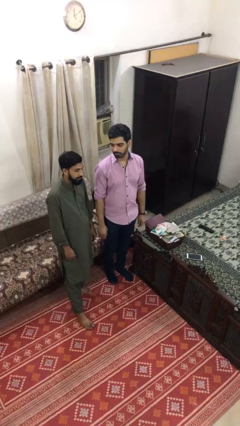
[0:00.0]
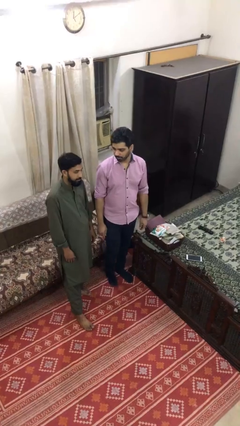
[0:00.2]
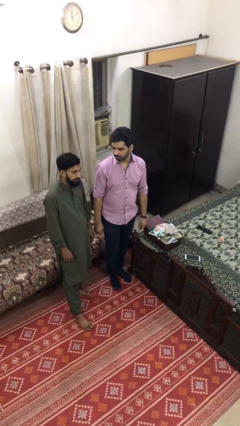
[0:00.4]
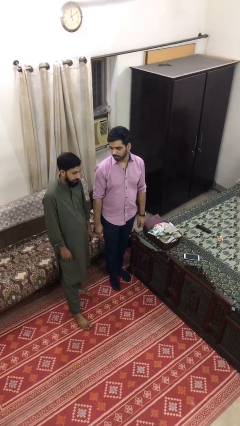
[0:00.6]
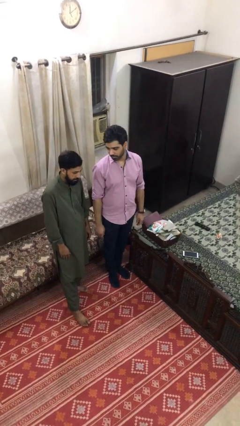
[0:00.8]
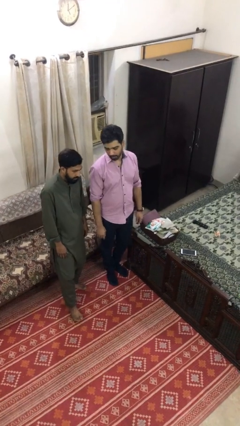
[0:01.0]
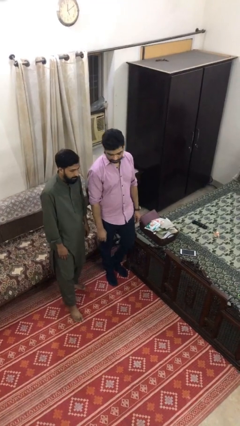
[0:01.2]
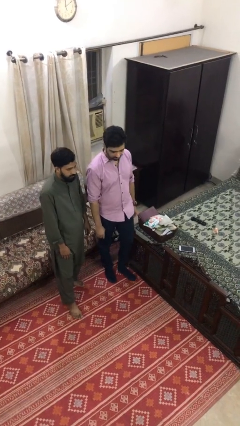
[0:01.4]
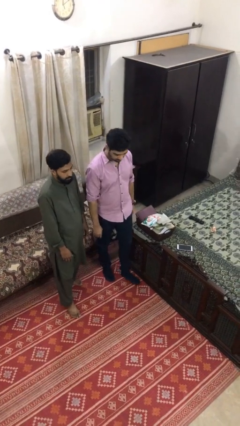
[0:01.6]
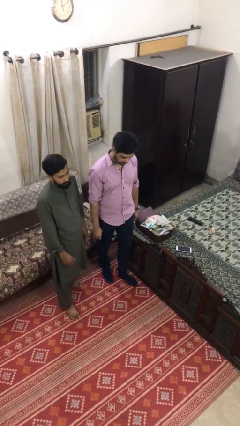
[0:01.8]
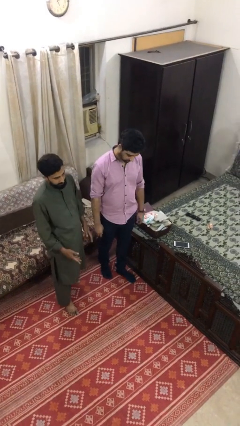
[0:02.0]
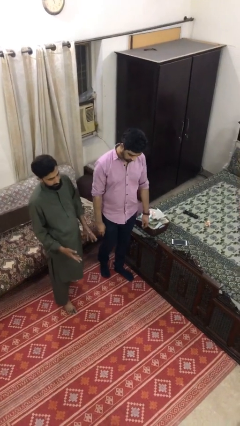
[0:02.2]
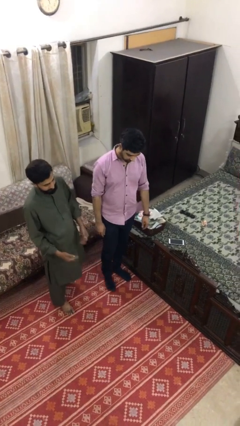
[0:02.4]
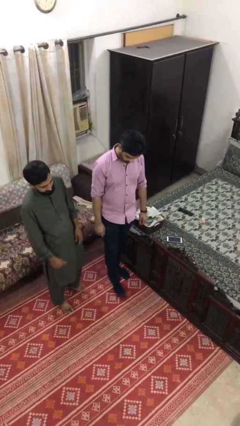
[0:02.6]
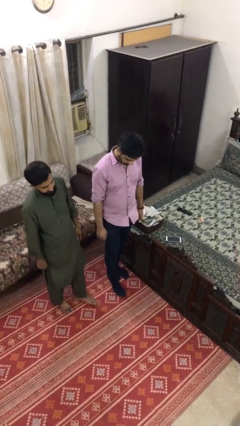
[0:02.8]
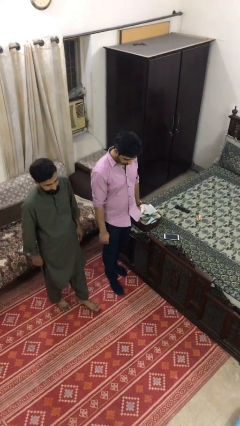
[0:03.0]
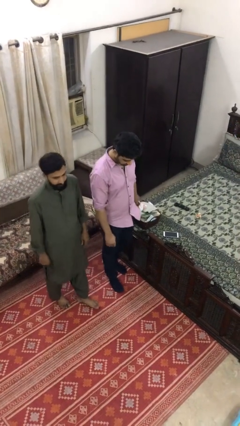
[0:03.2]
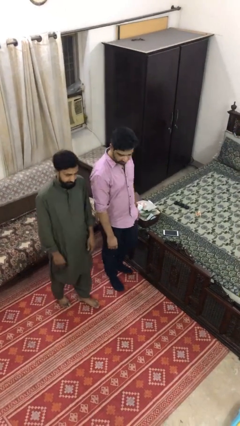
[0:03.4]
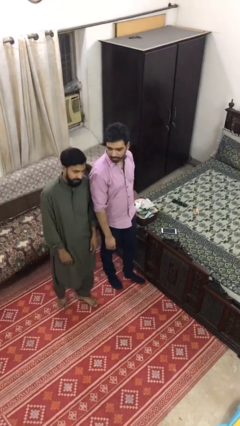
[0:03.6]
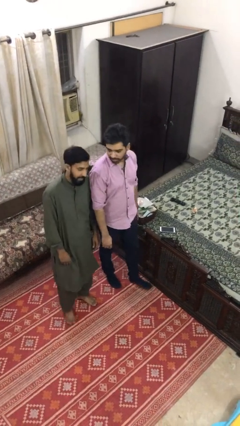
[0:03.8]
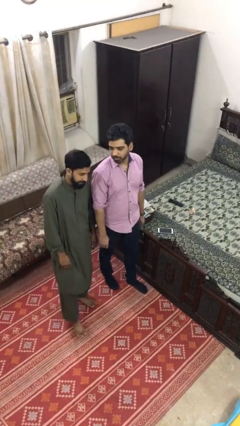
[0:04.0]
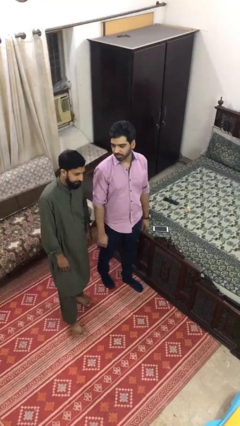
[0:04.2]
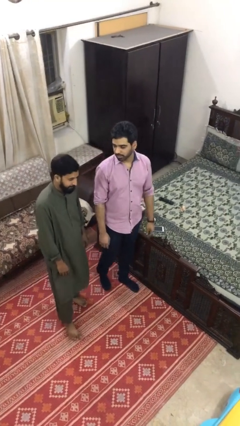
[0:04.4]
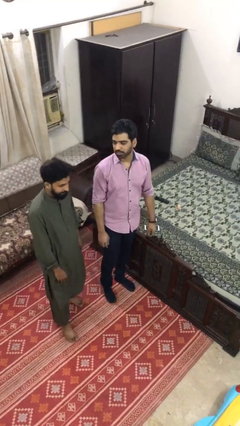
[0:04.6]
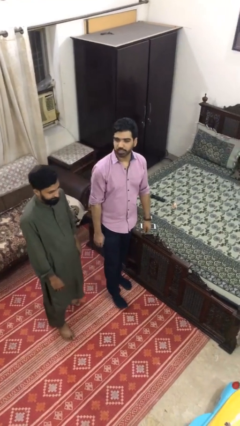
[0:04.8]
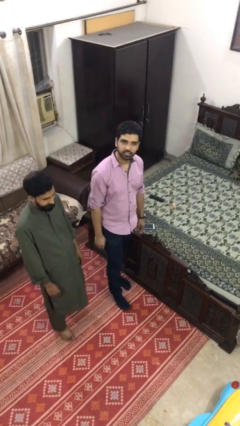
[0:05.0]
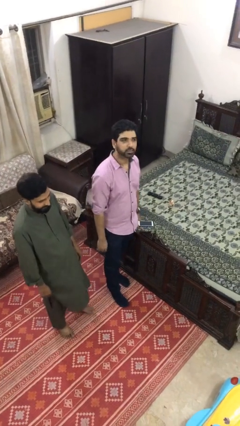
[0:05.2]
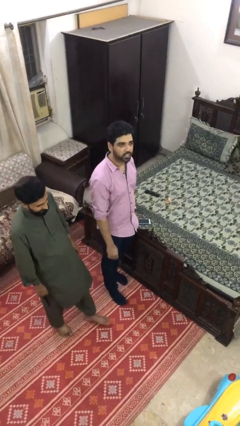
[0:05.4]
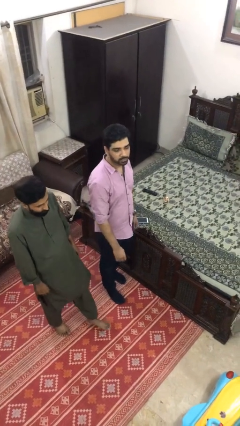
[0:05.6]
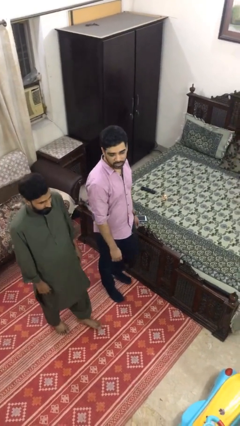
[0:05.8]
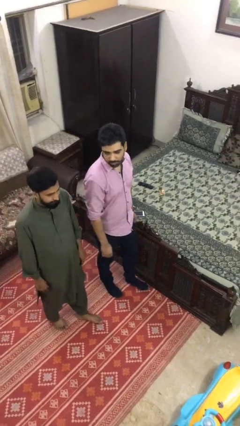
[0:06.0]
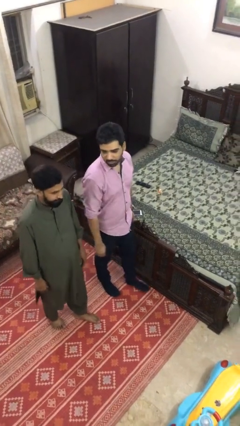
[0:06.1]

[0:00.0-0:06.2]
person talks to person

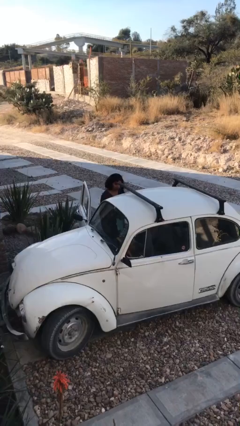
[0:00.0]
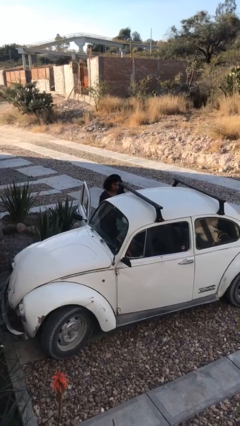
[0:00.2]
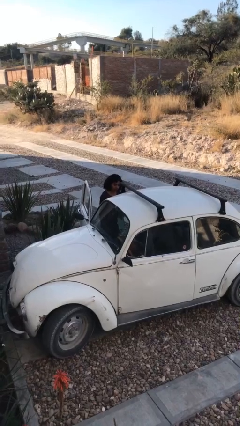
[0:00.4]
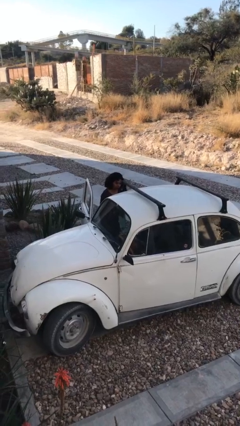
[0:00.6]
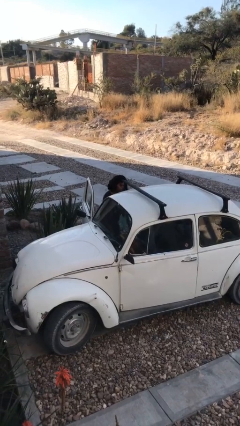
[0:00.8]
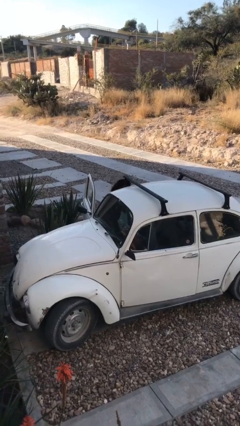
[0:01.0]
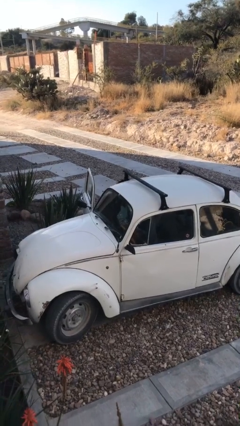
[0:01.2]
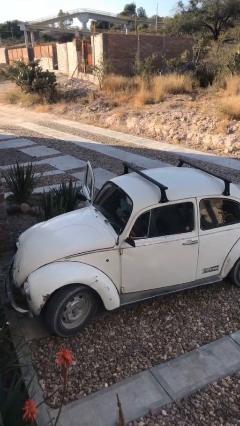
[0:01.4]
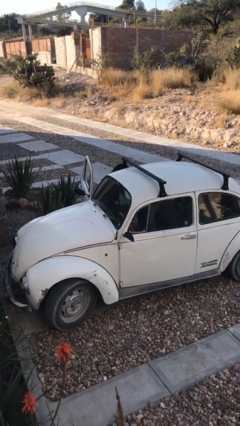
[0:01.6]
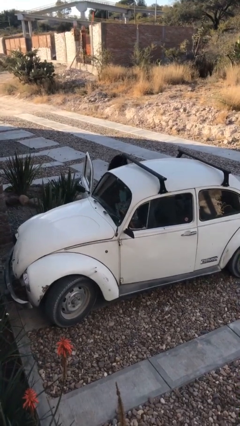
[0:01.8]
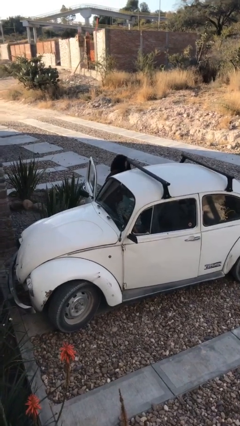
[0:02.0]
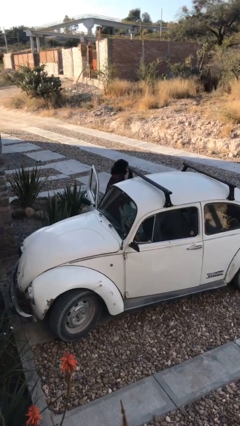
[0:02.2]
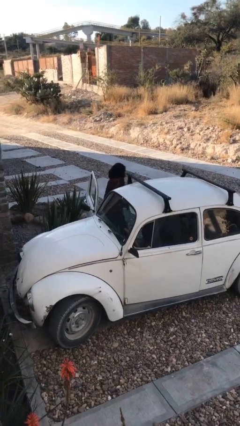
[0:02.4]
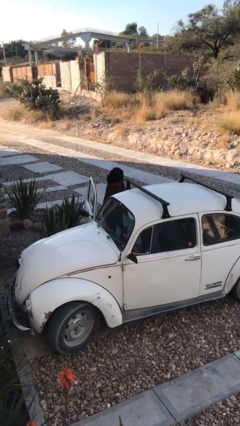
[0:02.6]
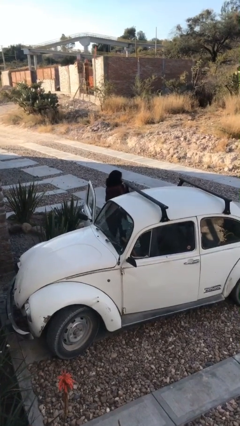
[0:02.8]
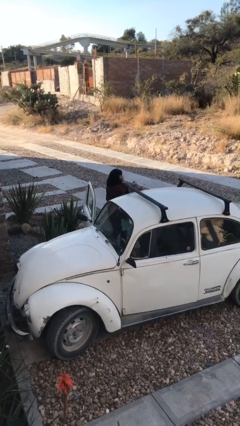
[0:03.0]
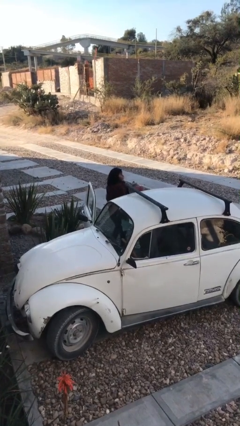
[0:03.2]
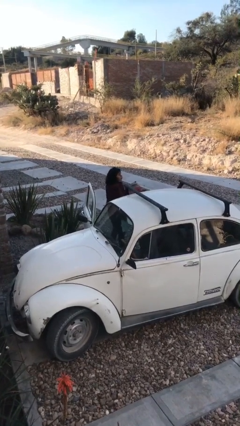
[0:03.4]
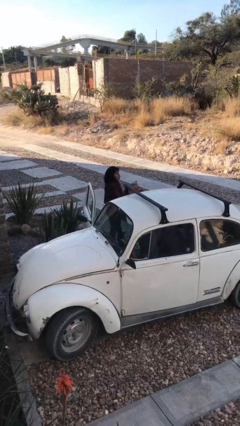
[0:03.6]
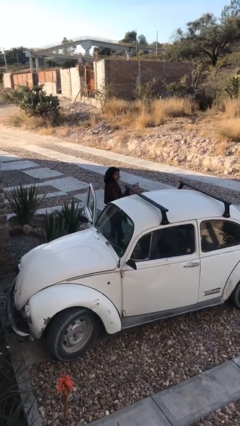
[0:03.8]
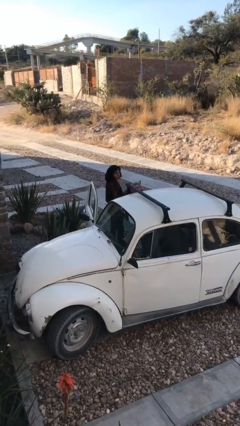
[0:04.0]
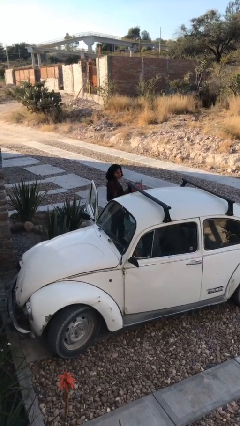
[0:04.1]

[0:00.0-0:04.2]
person unloads car

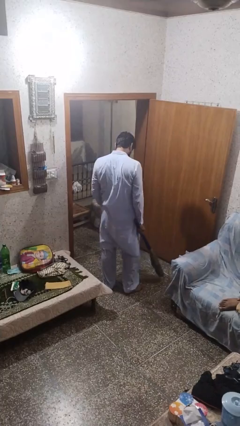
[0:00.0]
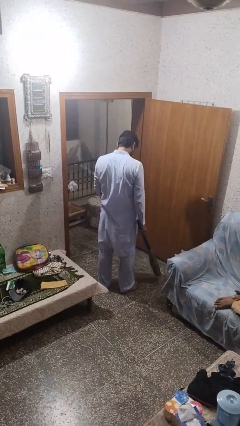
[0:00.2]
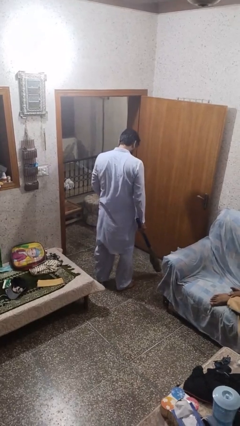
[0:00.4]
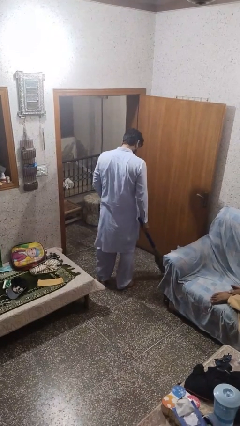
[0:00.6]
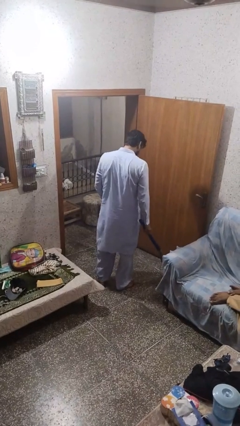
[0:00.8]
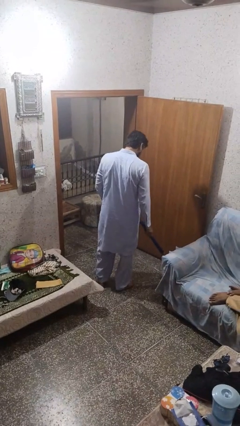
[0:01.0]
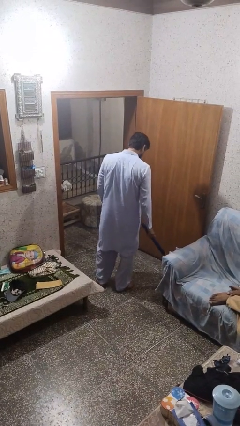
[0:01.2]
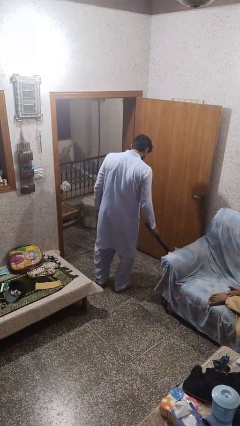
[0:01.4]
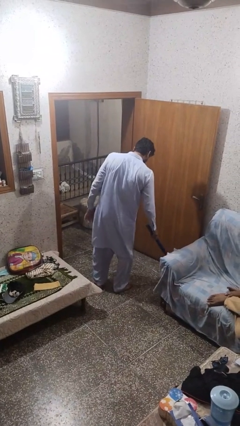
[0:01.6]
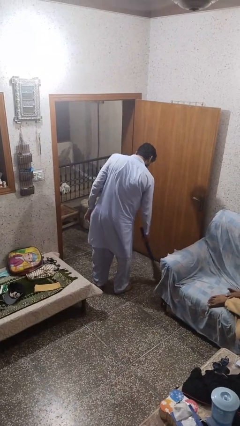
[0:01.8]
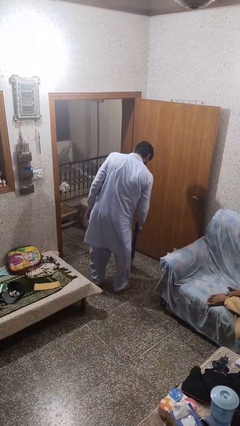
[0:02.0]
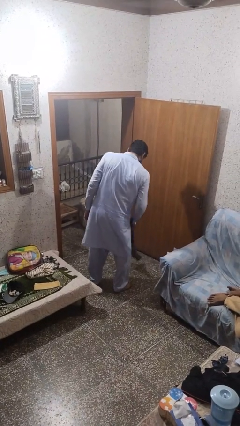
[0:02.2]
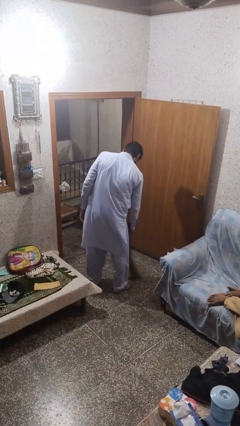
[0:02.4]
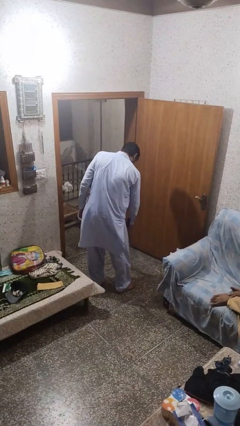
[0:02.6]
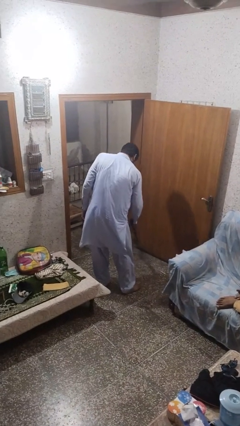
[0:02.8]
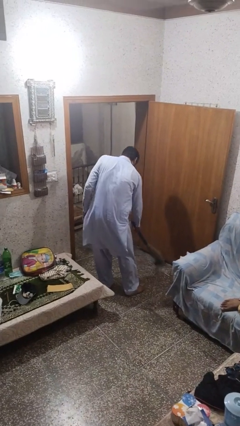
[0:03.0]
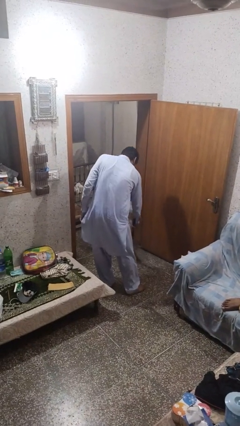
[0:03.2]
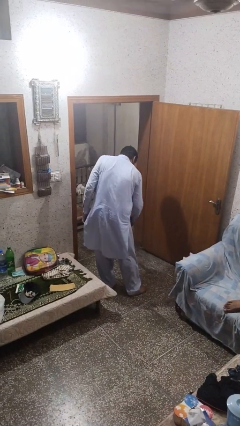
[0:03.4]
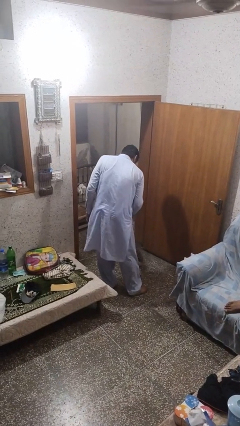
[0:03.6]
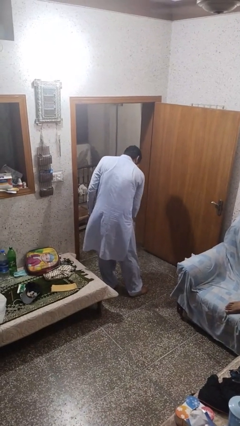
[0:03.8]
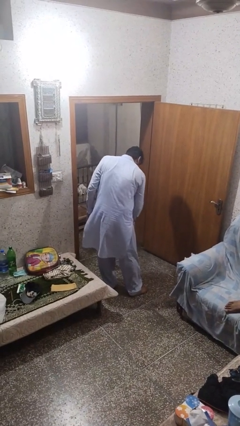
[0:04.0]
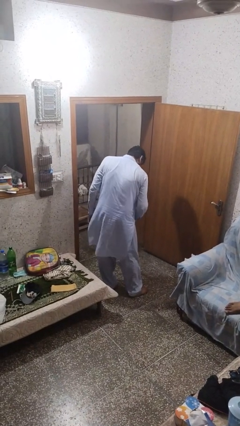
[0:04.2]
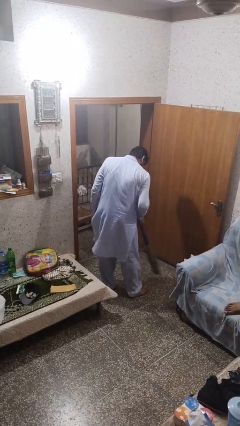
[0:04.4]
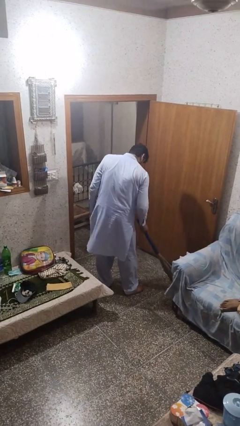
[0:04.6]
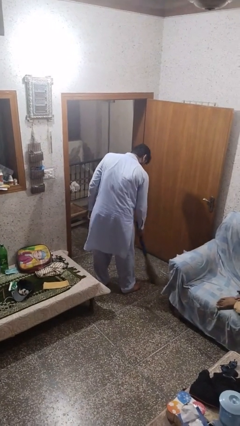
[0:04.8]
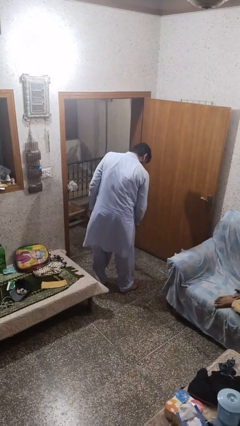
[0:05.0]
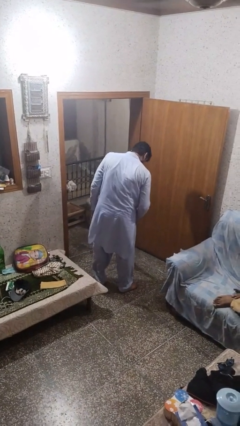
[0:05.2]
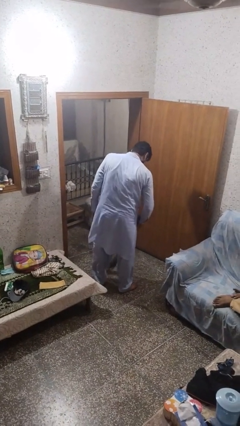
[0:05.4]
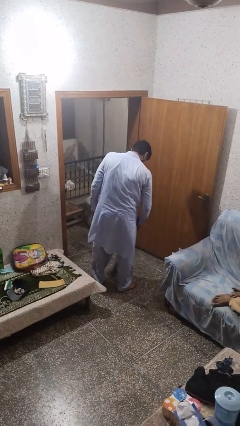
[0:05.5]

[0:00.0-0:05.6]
person sweeps floor

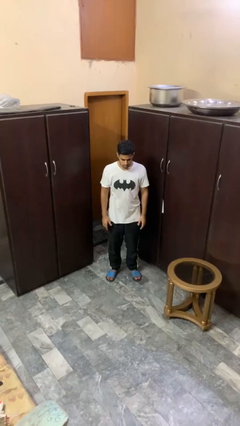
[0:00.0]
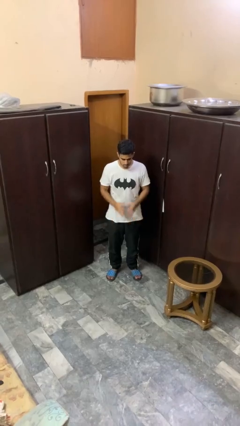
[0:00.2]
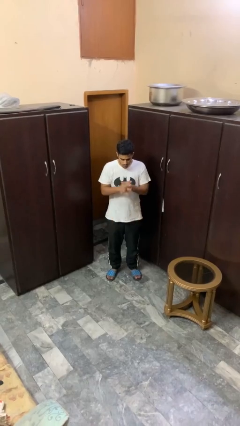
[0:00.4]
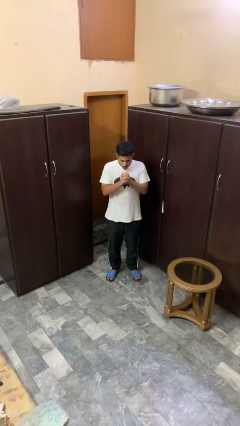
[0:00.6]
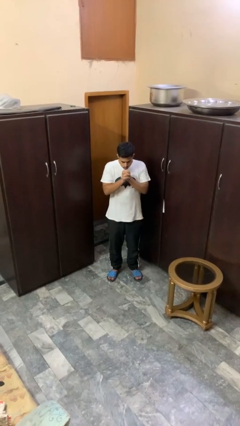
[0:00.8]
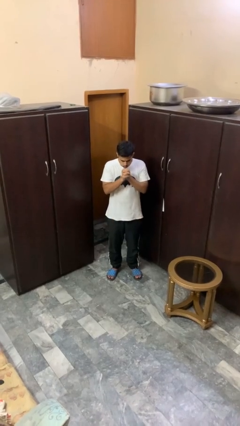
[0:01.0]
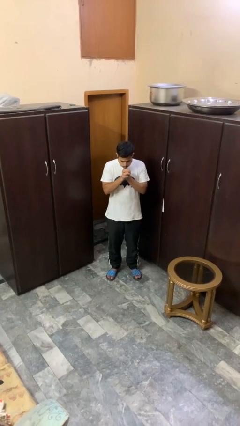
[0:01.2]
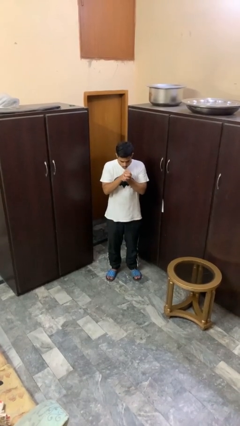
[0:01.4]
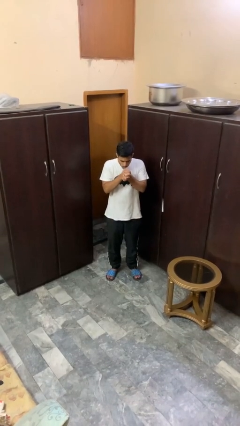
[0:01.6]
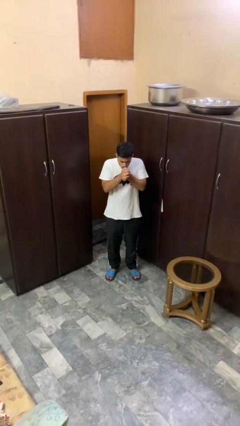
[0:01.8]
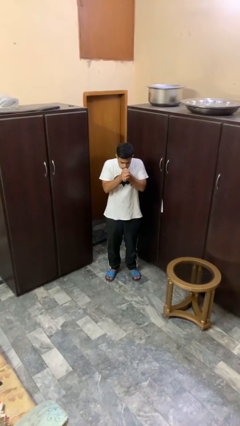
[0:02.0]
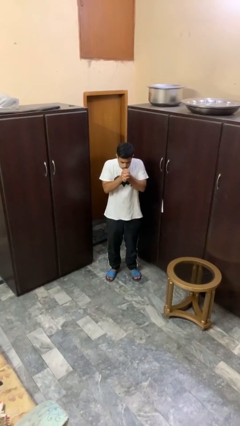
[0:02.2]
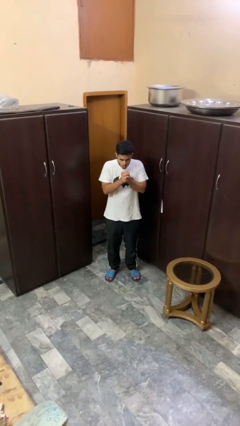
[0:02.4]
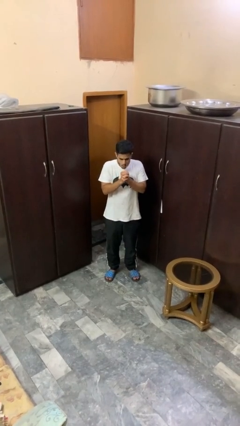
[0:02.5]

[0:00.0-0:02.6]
person blows into hands
